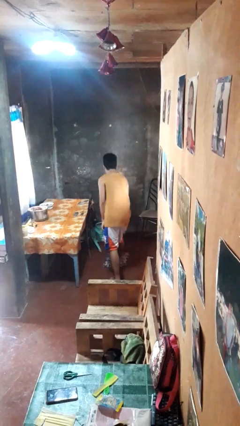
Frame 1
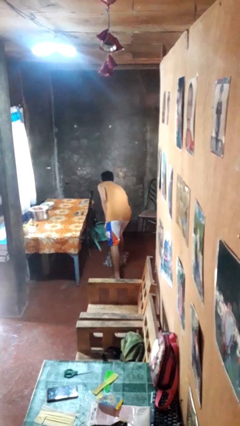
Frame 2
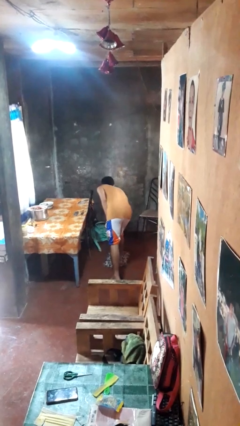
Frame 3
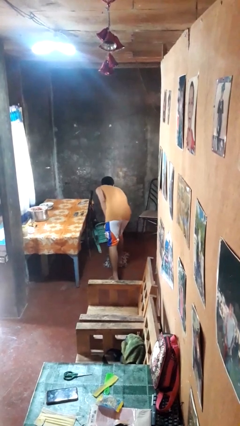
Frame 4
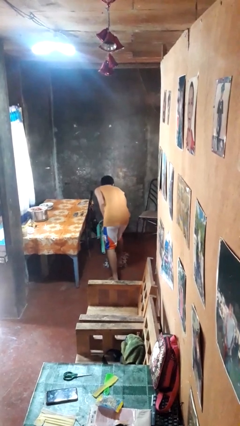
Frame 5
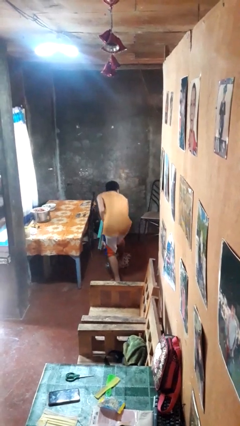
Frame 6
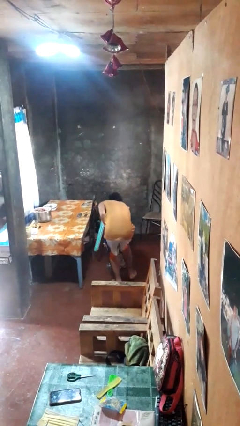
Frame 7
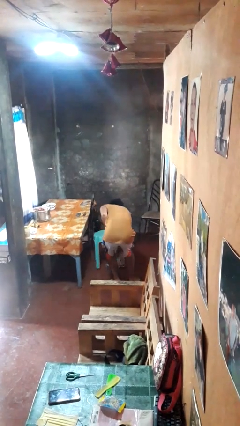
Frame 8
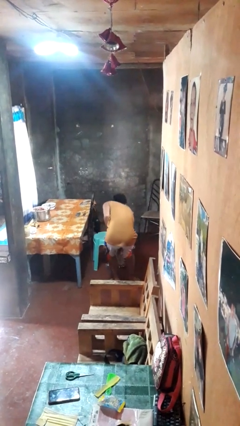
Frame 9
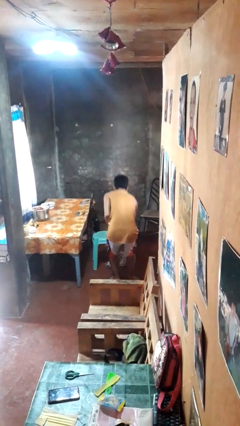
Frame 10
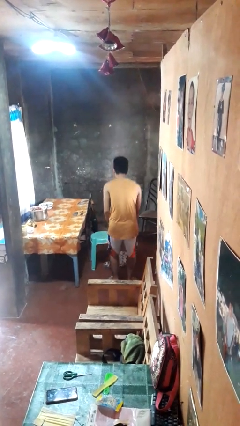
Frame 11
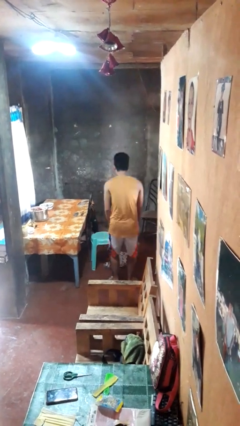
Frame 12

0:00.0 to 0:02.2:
person sets upright furniture

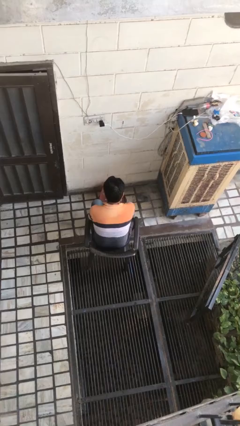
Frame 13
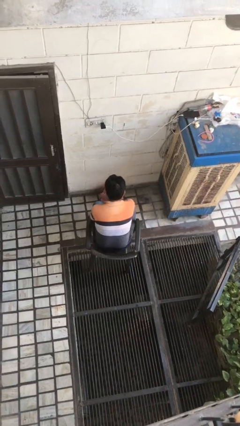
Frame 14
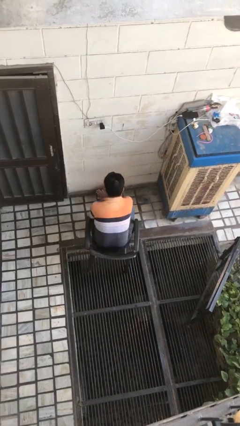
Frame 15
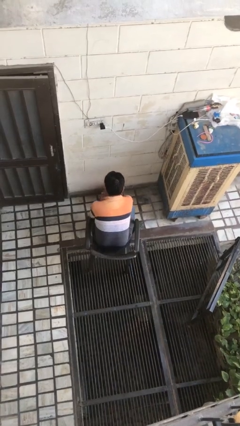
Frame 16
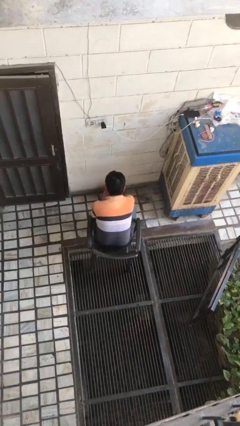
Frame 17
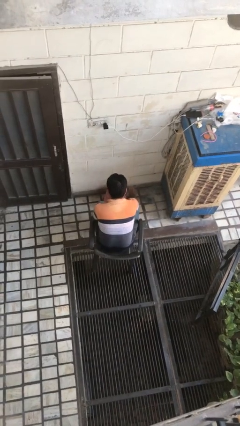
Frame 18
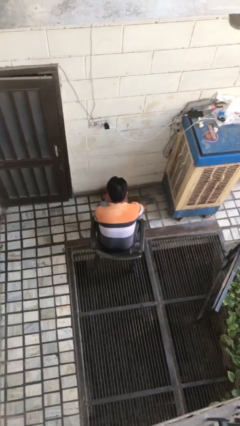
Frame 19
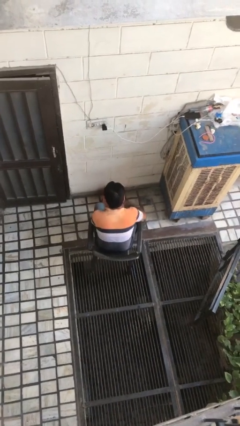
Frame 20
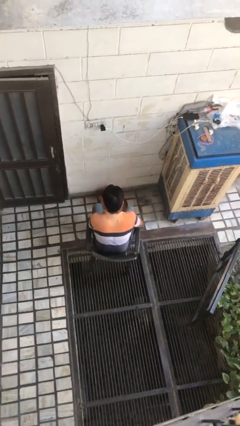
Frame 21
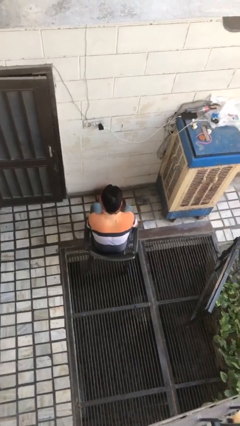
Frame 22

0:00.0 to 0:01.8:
person waves hand over object

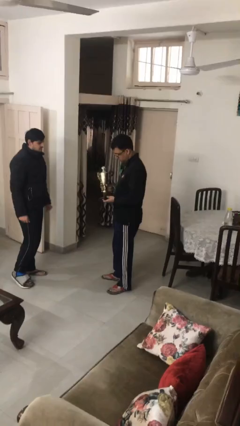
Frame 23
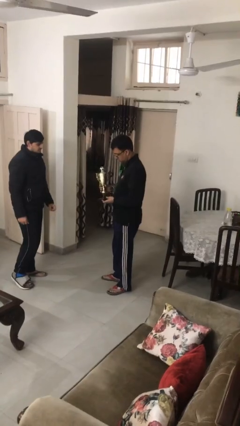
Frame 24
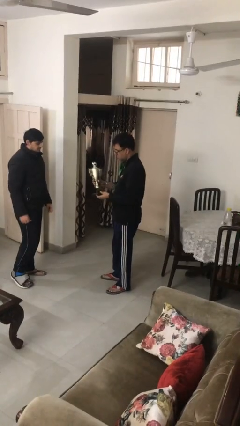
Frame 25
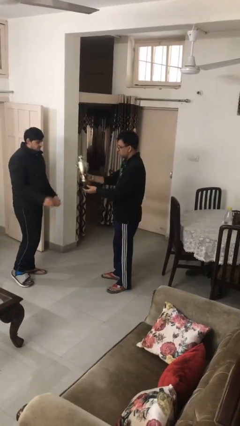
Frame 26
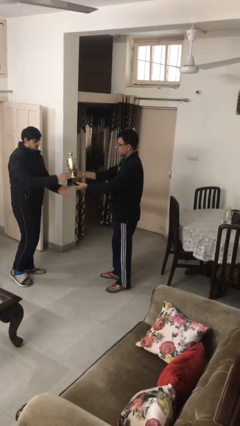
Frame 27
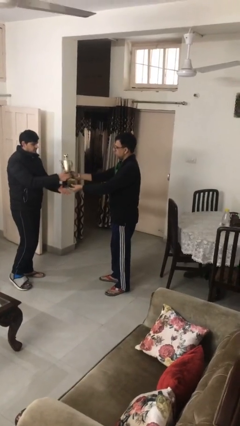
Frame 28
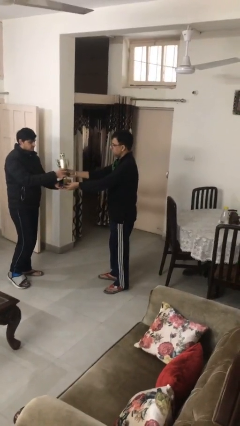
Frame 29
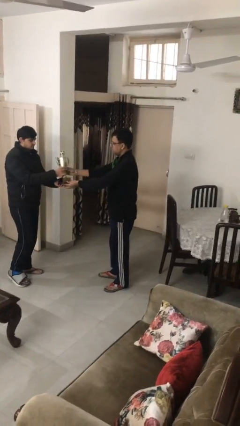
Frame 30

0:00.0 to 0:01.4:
person transfers object to person

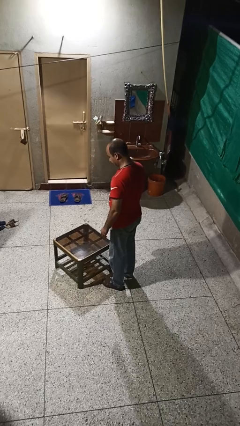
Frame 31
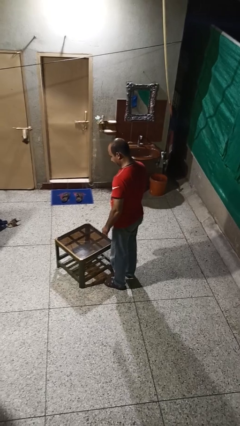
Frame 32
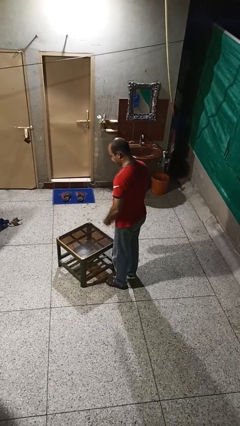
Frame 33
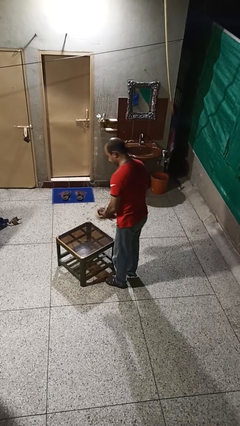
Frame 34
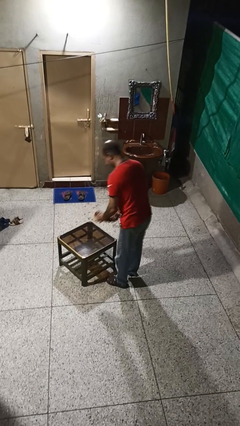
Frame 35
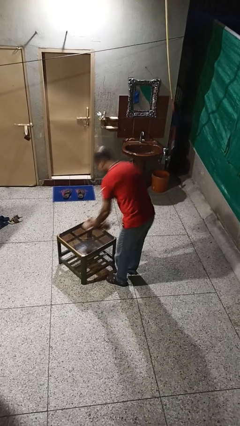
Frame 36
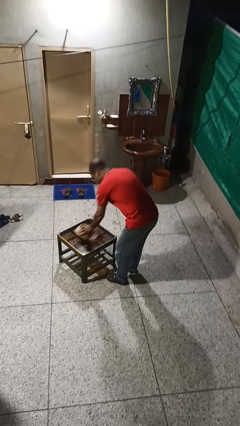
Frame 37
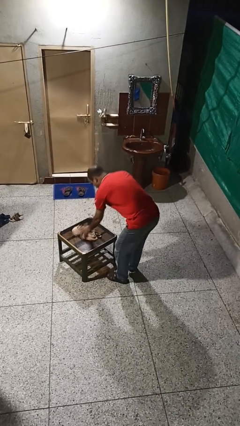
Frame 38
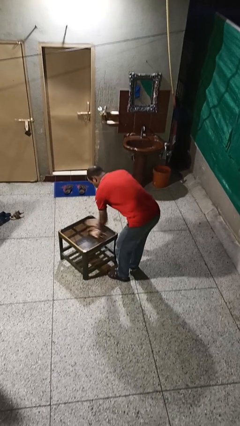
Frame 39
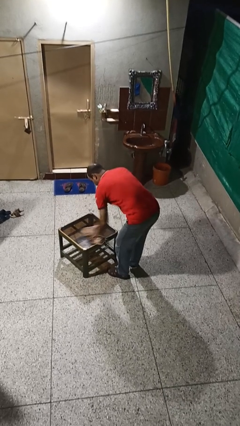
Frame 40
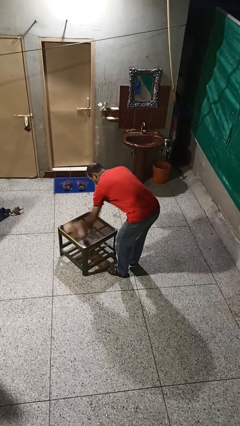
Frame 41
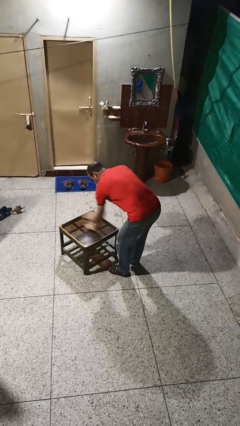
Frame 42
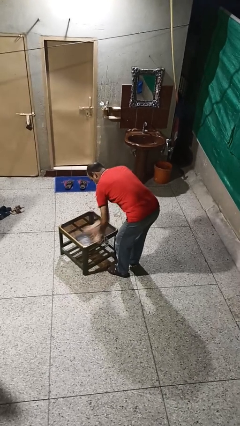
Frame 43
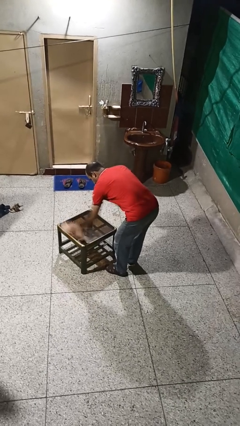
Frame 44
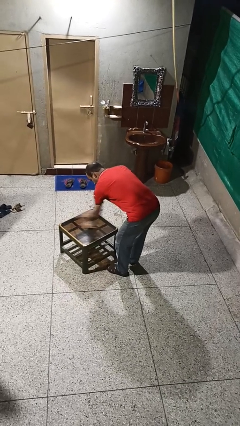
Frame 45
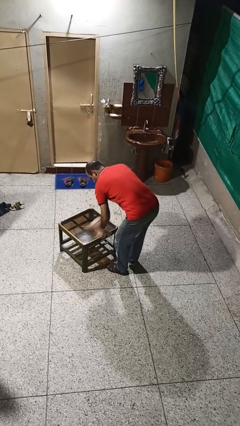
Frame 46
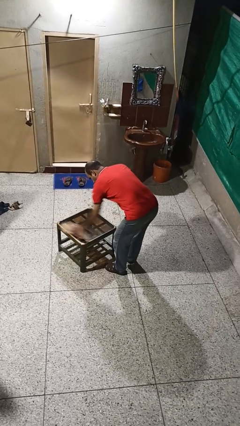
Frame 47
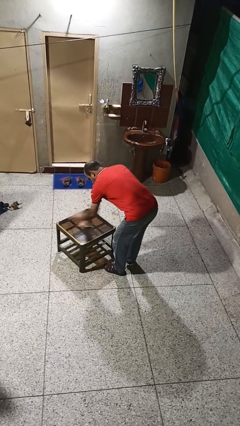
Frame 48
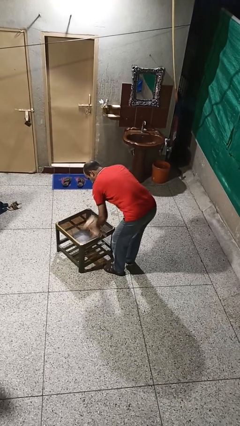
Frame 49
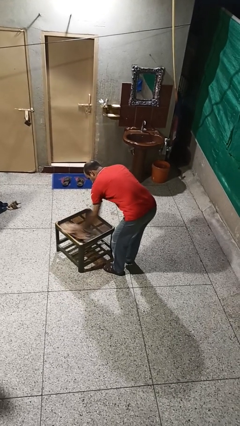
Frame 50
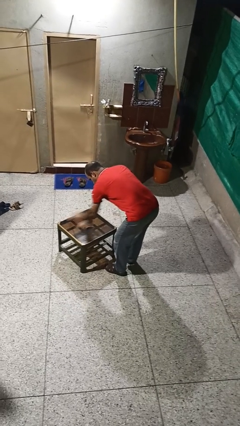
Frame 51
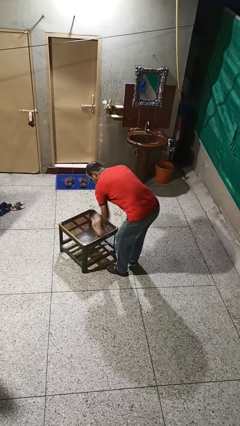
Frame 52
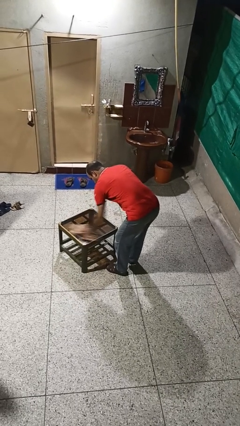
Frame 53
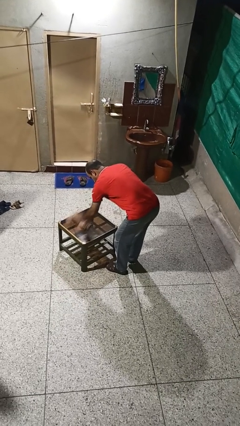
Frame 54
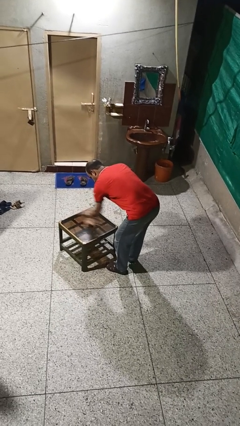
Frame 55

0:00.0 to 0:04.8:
person cleans table with rag

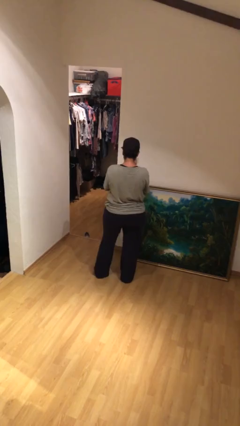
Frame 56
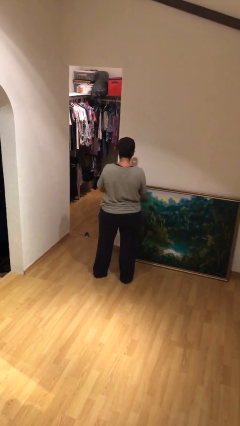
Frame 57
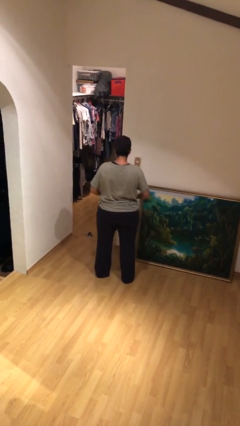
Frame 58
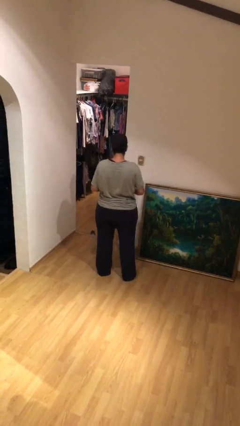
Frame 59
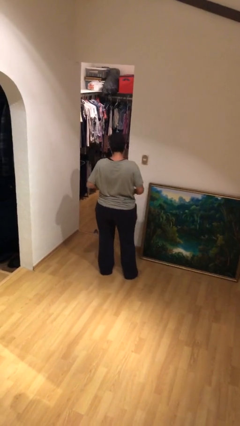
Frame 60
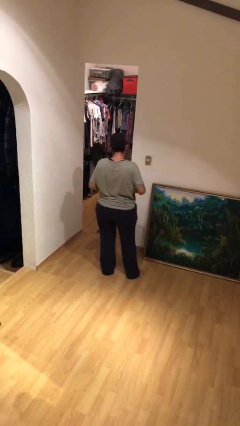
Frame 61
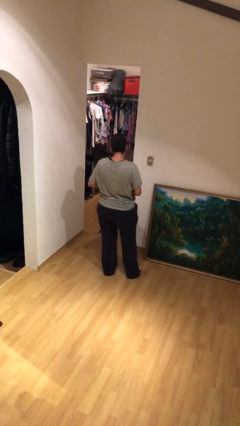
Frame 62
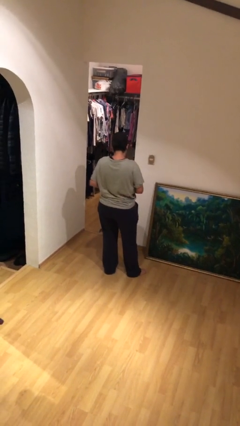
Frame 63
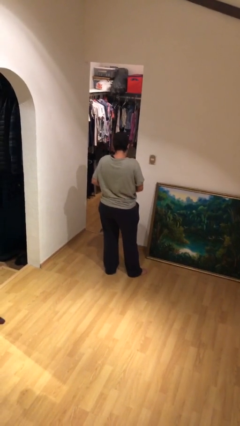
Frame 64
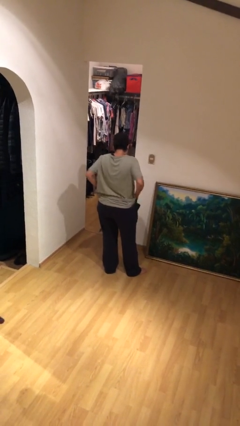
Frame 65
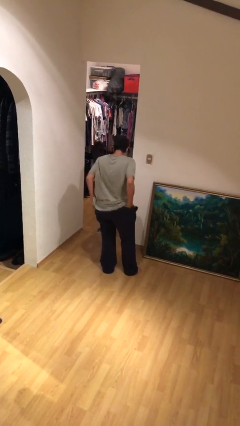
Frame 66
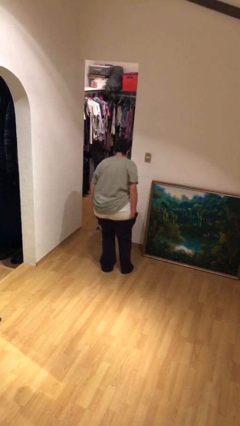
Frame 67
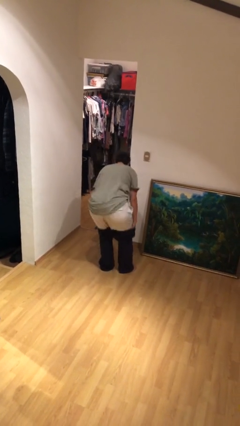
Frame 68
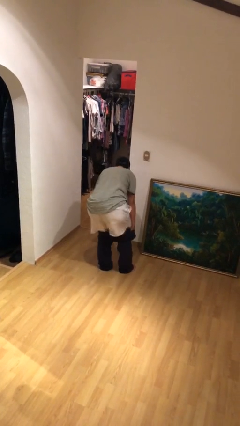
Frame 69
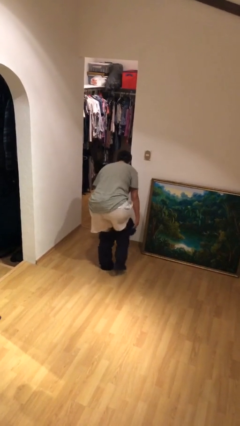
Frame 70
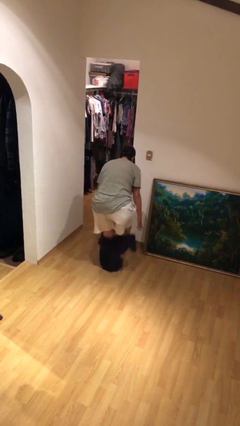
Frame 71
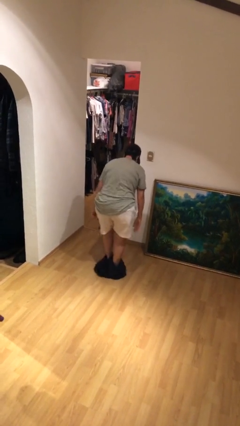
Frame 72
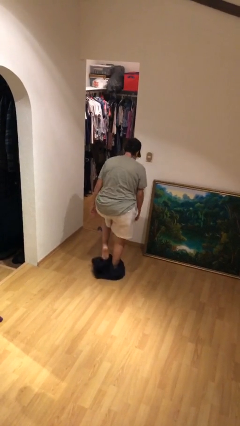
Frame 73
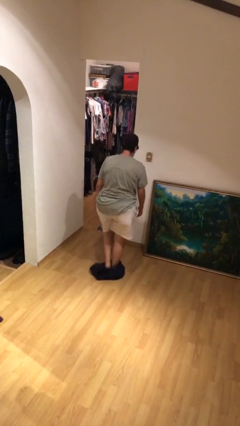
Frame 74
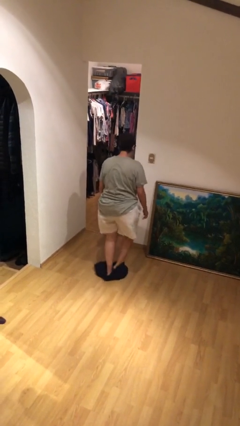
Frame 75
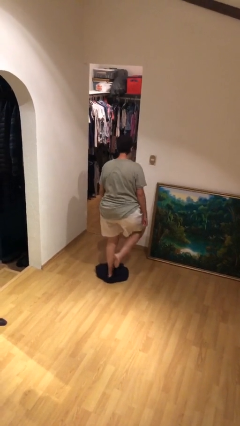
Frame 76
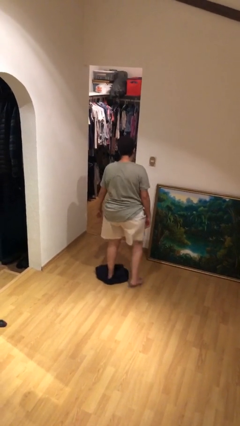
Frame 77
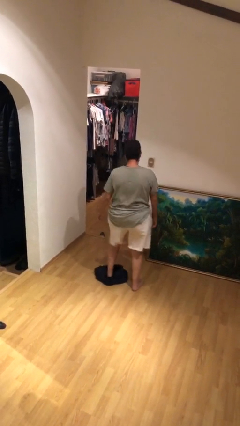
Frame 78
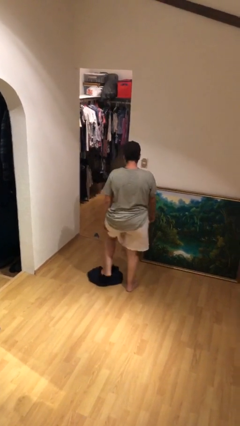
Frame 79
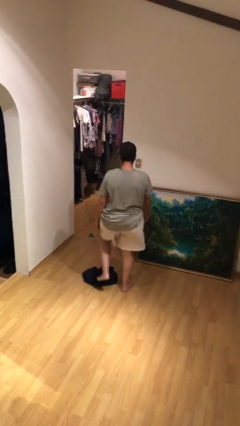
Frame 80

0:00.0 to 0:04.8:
person takes off pants

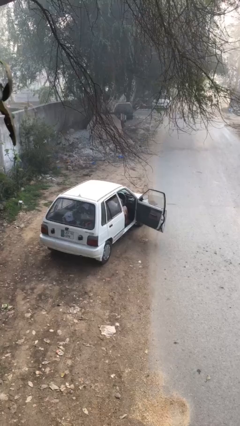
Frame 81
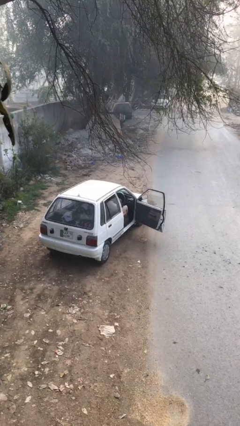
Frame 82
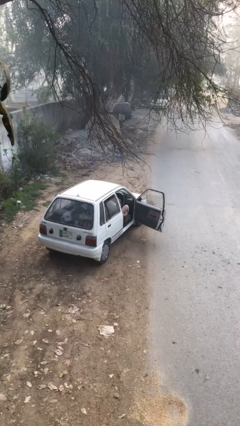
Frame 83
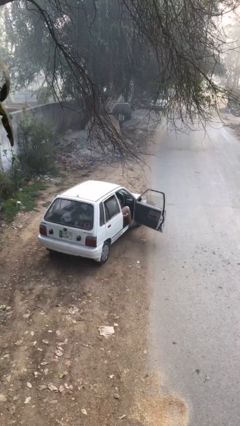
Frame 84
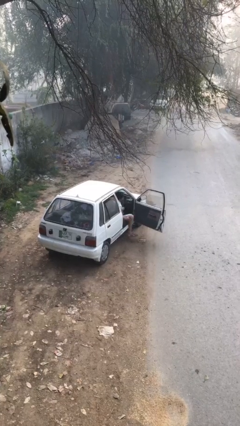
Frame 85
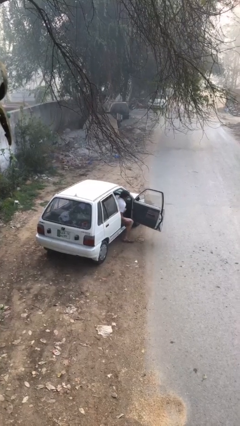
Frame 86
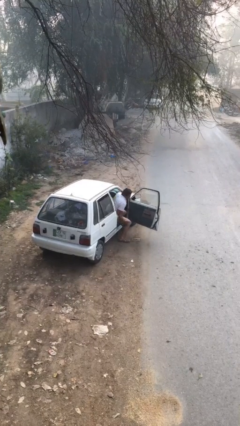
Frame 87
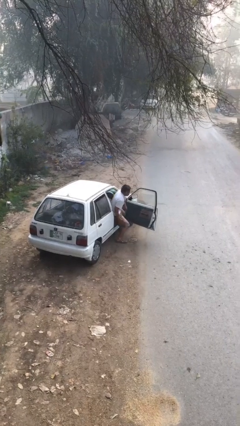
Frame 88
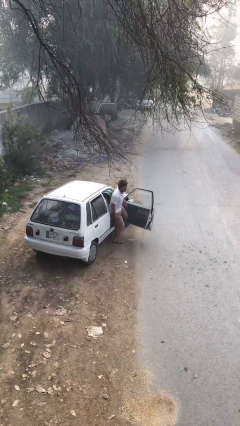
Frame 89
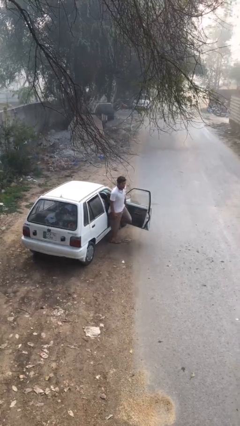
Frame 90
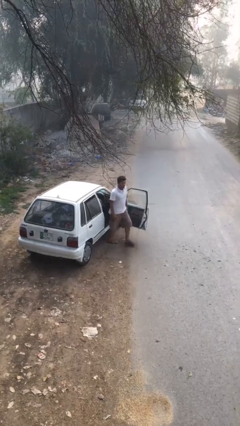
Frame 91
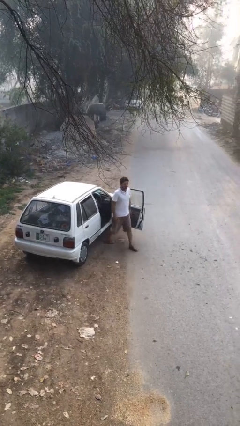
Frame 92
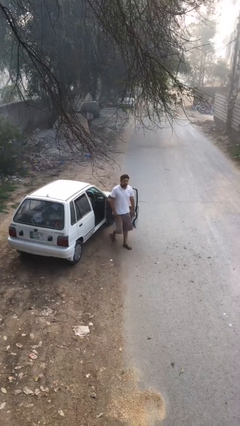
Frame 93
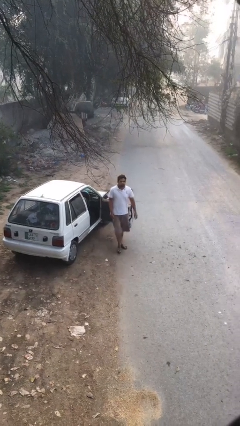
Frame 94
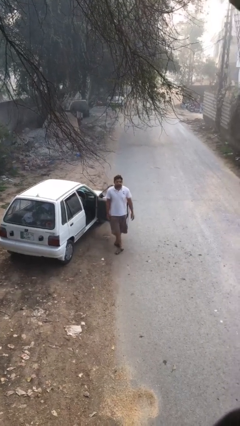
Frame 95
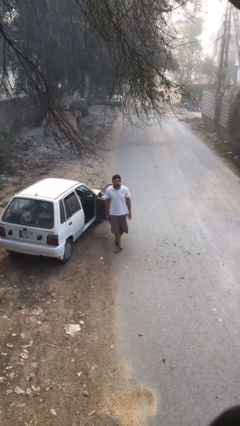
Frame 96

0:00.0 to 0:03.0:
person exits car
